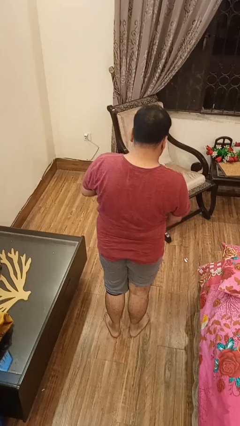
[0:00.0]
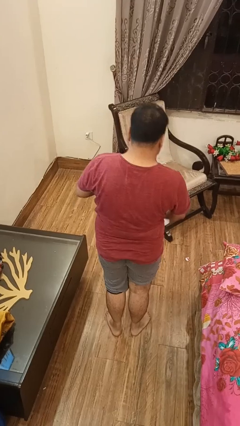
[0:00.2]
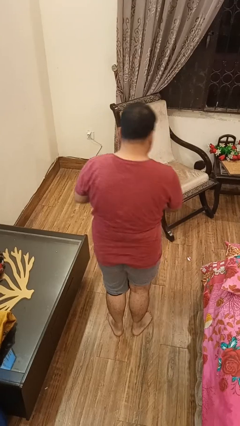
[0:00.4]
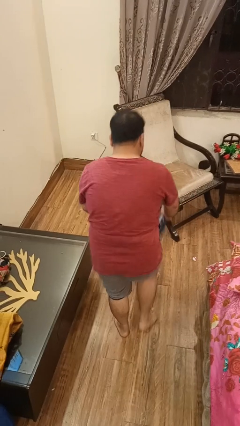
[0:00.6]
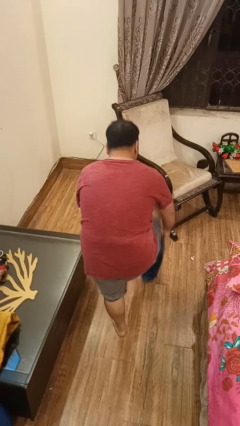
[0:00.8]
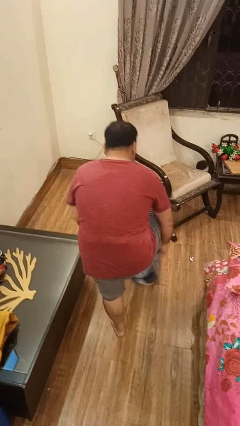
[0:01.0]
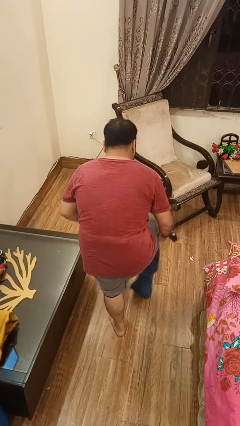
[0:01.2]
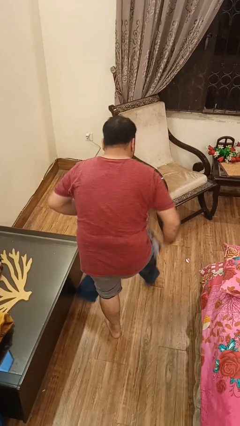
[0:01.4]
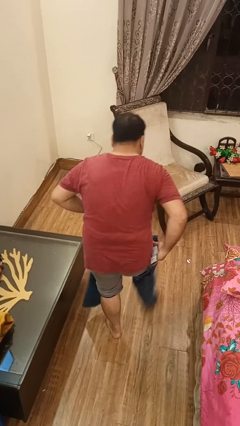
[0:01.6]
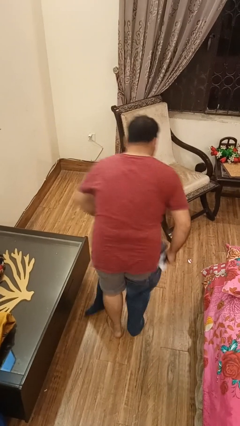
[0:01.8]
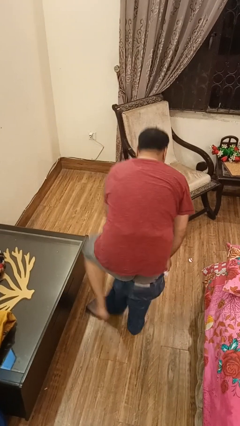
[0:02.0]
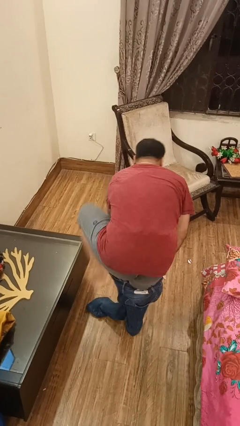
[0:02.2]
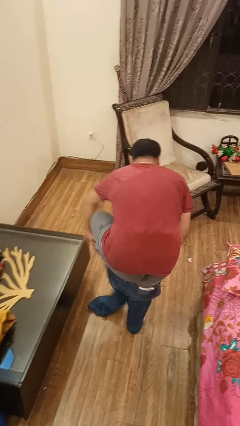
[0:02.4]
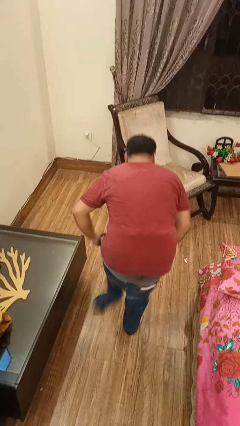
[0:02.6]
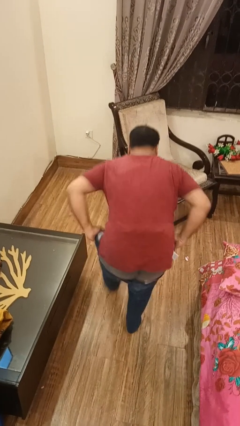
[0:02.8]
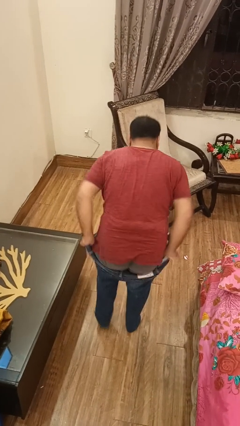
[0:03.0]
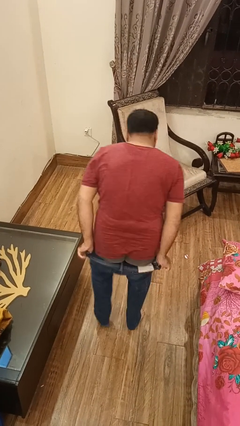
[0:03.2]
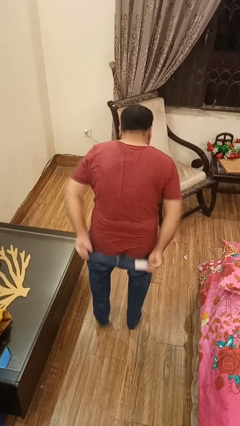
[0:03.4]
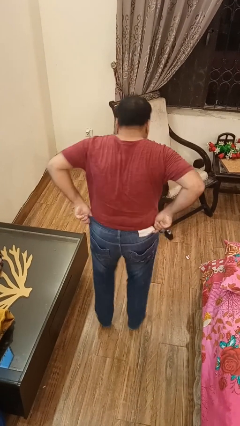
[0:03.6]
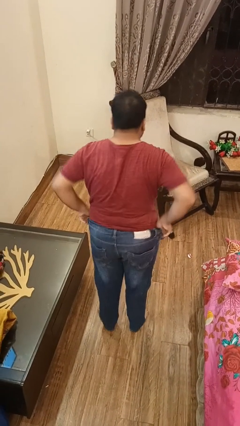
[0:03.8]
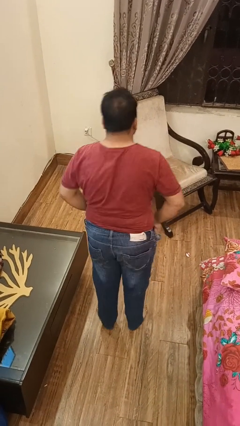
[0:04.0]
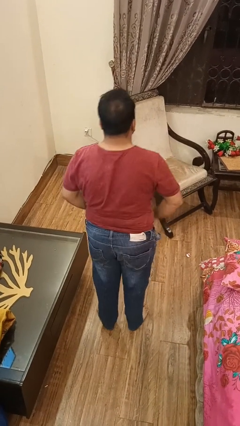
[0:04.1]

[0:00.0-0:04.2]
person puts on pants

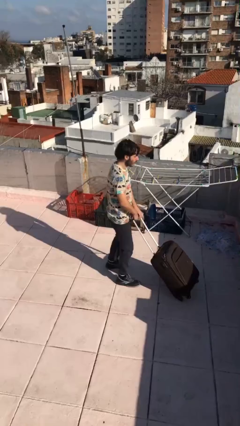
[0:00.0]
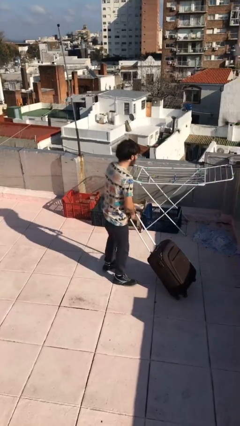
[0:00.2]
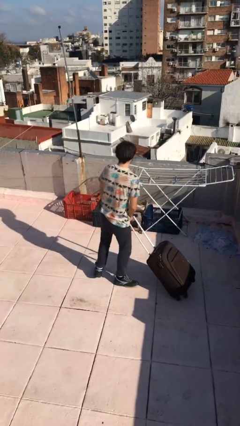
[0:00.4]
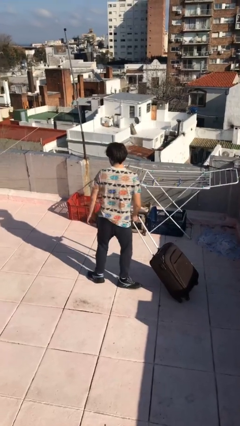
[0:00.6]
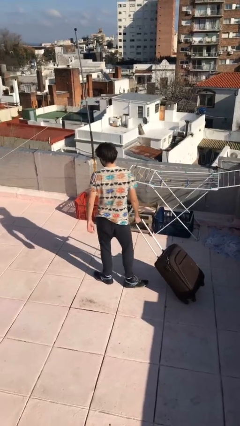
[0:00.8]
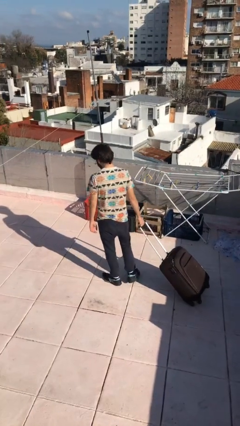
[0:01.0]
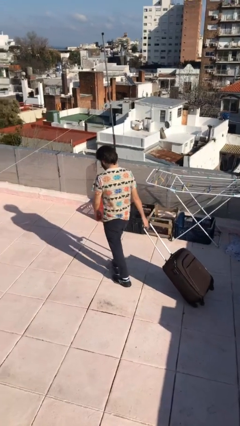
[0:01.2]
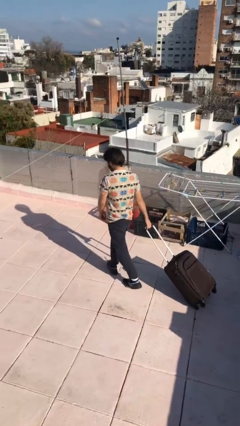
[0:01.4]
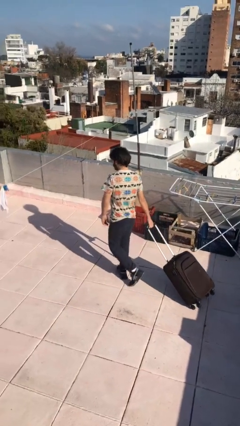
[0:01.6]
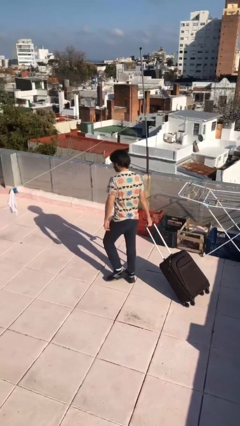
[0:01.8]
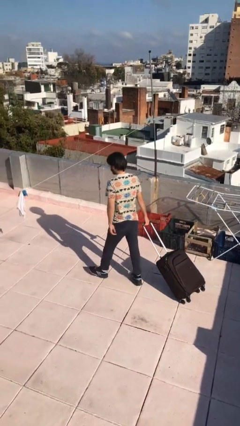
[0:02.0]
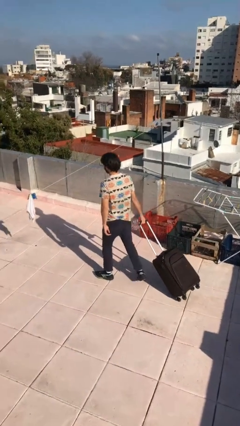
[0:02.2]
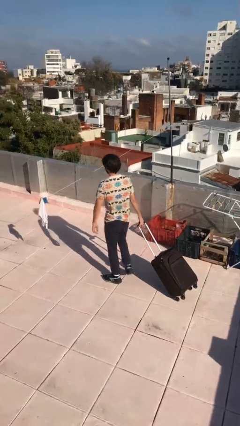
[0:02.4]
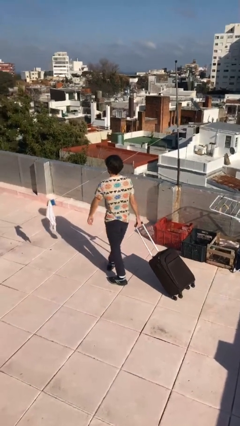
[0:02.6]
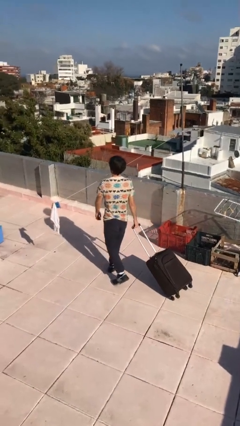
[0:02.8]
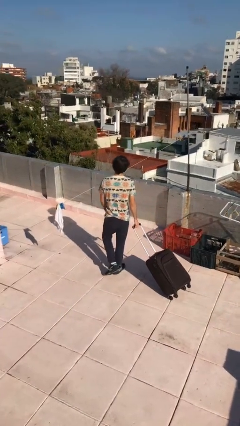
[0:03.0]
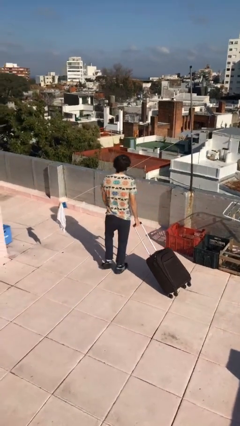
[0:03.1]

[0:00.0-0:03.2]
person pulls wheeled cart

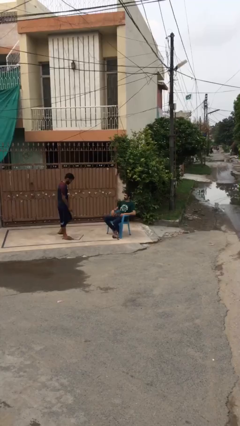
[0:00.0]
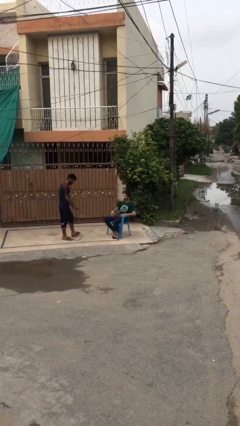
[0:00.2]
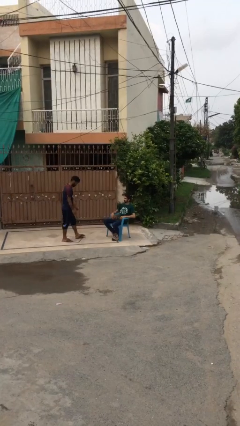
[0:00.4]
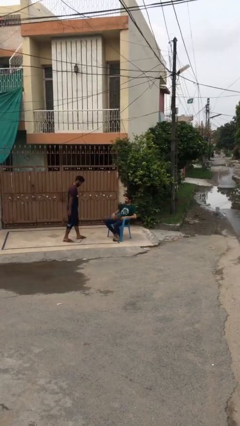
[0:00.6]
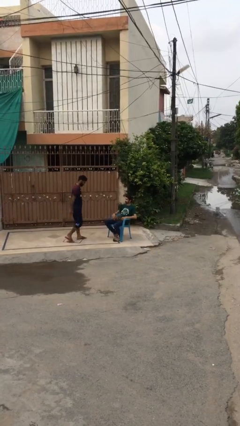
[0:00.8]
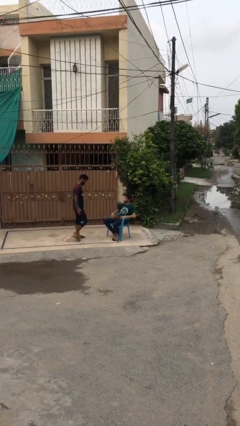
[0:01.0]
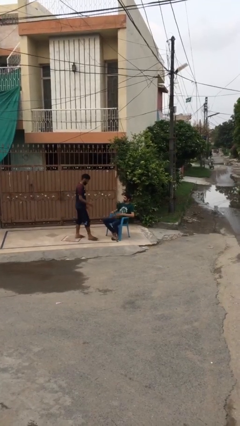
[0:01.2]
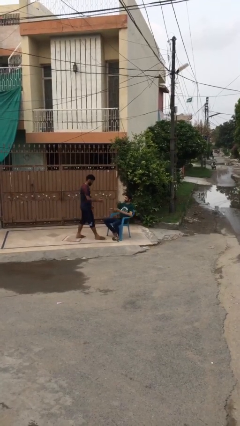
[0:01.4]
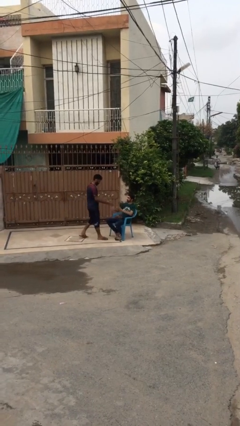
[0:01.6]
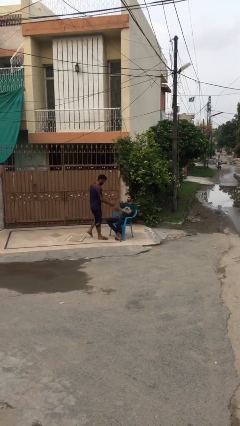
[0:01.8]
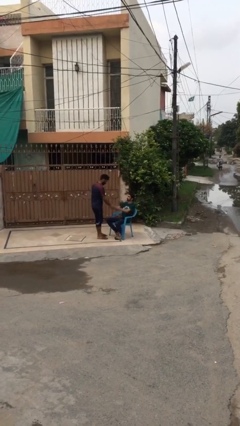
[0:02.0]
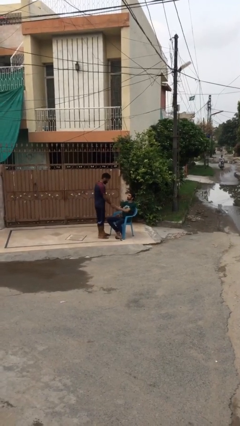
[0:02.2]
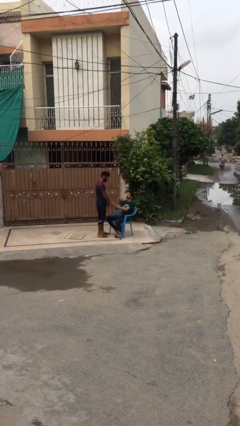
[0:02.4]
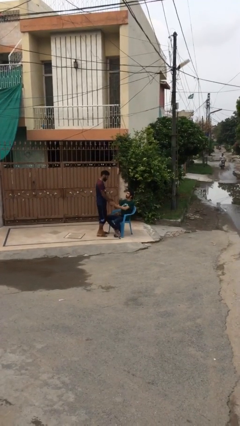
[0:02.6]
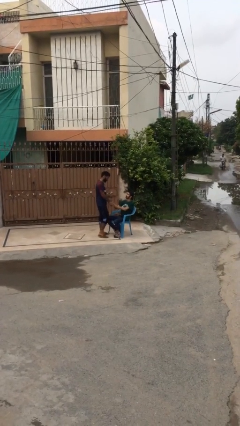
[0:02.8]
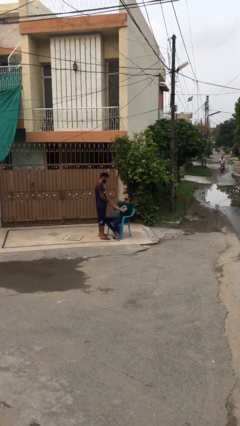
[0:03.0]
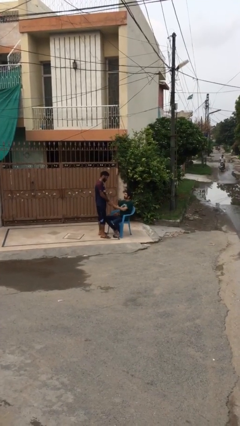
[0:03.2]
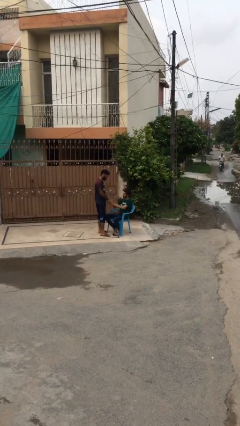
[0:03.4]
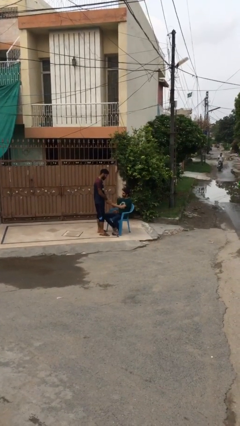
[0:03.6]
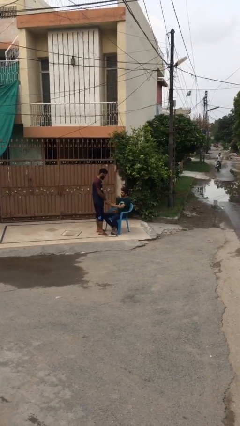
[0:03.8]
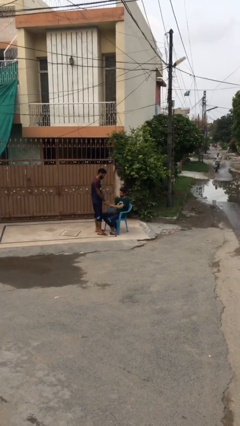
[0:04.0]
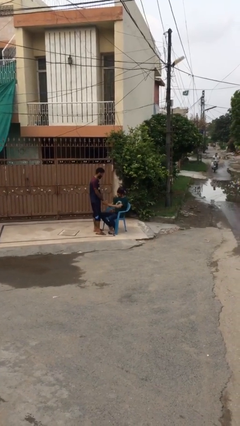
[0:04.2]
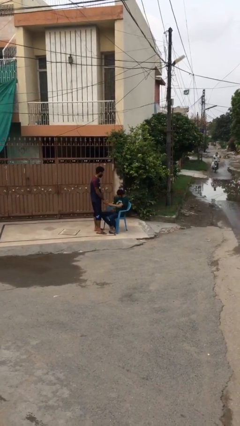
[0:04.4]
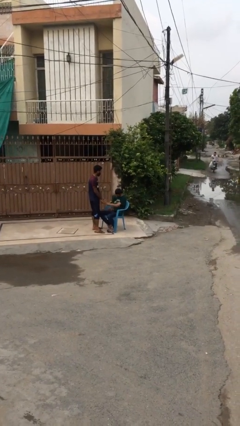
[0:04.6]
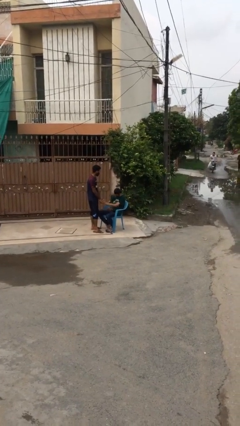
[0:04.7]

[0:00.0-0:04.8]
person shakes hand

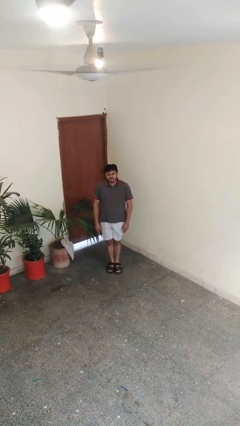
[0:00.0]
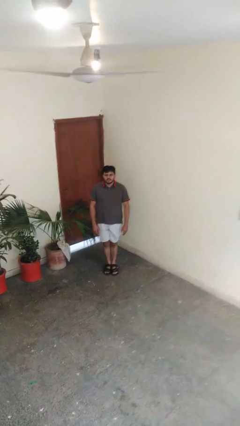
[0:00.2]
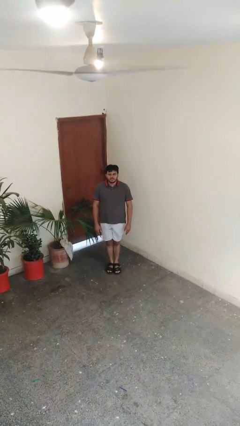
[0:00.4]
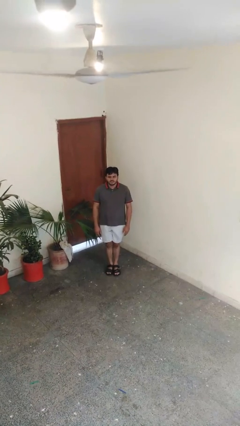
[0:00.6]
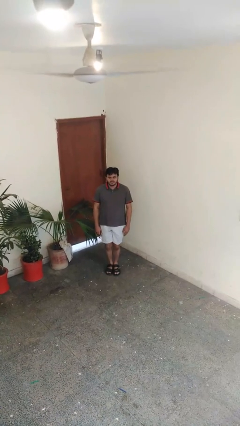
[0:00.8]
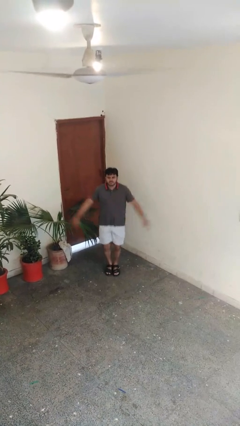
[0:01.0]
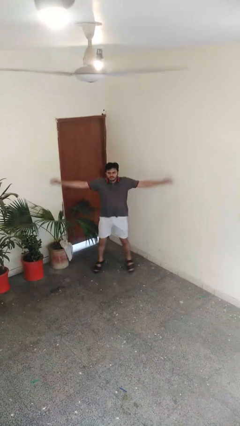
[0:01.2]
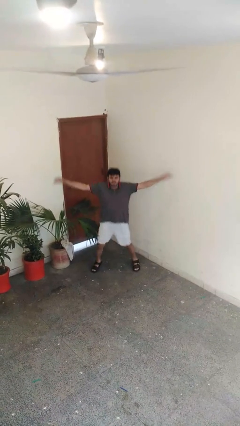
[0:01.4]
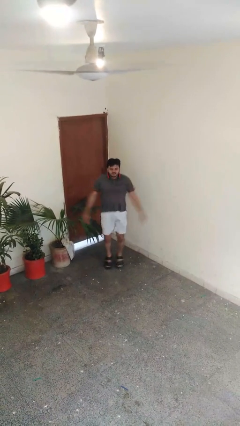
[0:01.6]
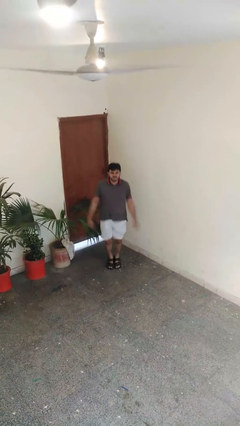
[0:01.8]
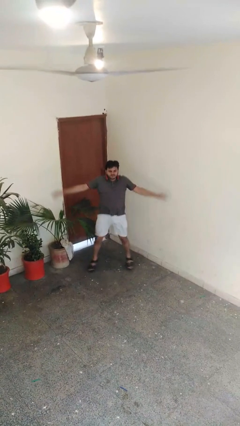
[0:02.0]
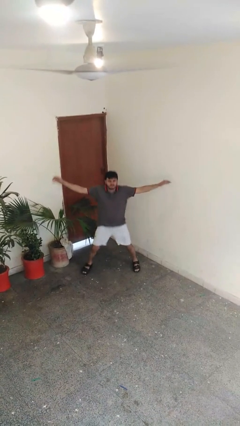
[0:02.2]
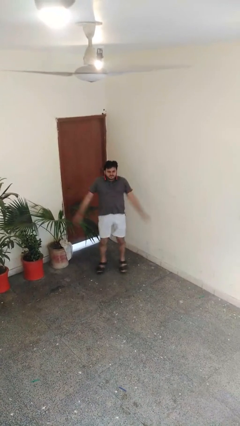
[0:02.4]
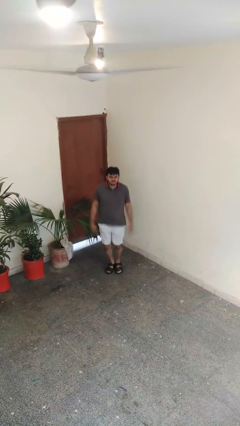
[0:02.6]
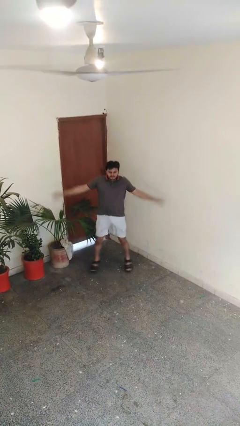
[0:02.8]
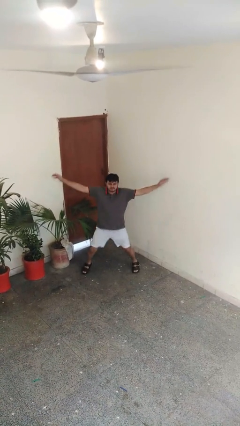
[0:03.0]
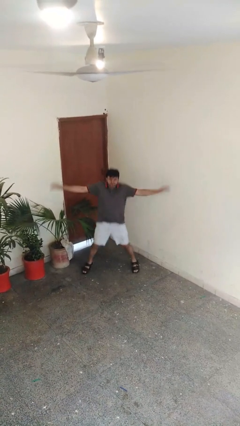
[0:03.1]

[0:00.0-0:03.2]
person exercises with jumping jacks

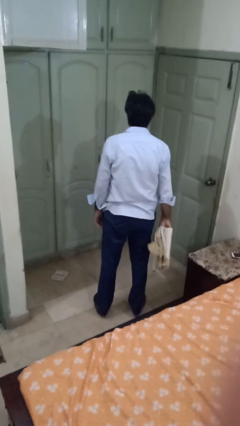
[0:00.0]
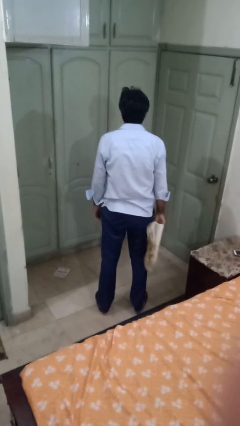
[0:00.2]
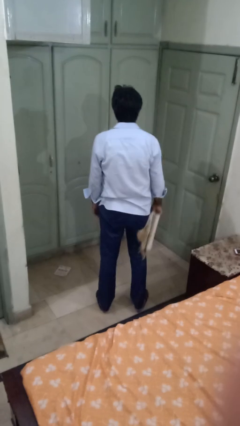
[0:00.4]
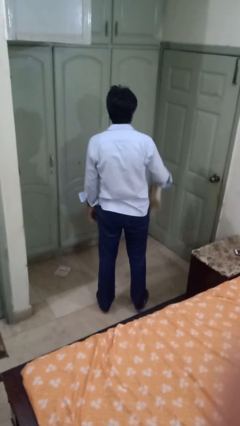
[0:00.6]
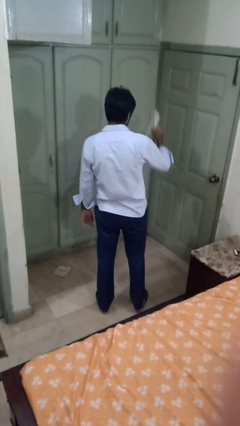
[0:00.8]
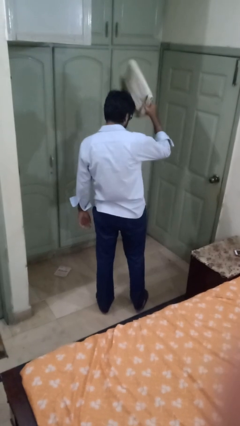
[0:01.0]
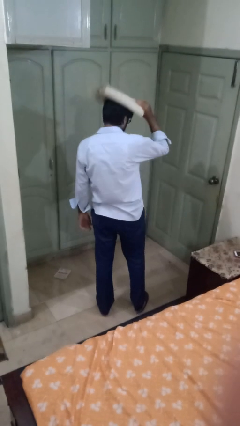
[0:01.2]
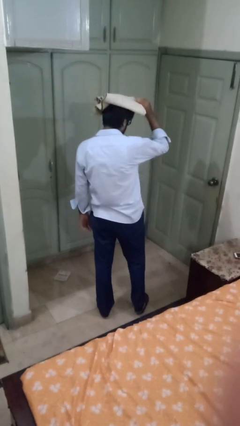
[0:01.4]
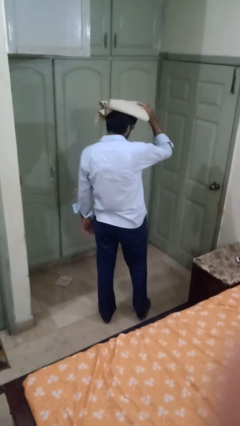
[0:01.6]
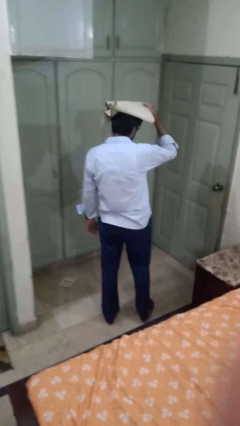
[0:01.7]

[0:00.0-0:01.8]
person holds object above head

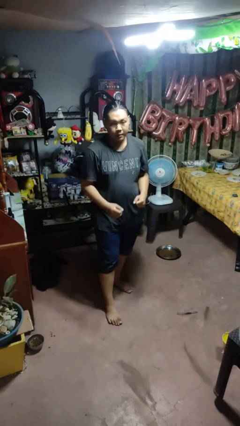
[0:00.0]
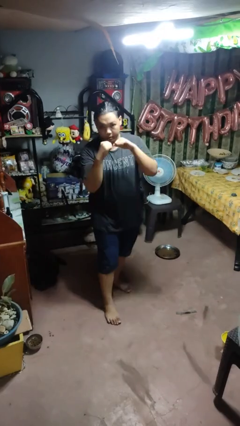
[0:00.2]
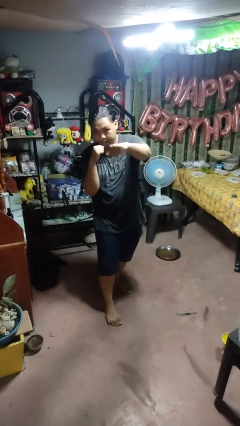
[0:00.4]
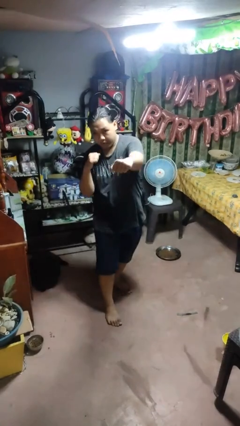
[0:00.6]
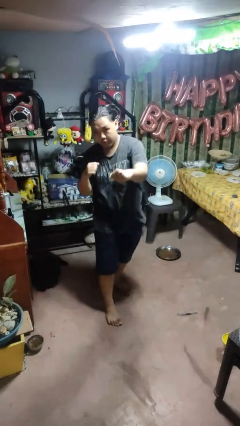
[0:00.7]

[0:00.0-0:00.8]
person punches
